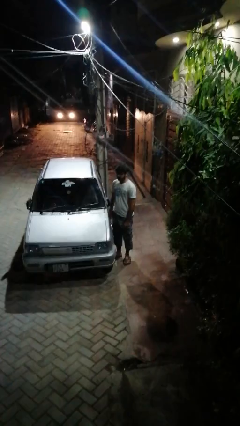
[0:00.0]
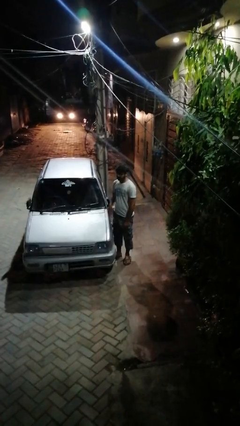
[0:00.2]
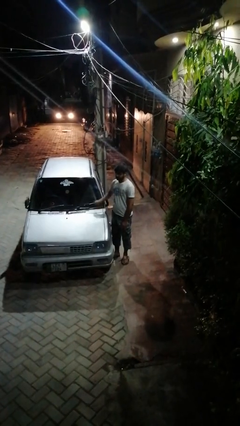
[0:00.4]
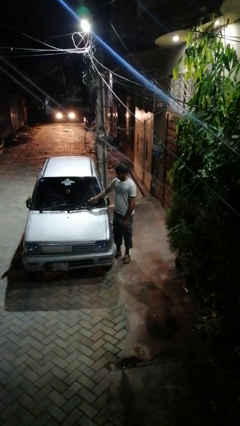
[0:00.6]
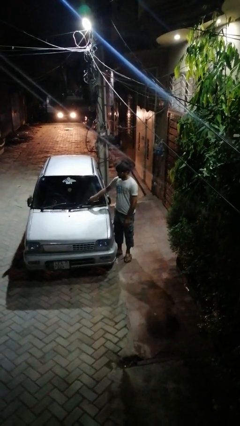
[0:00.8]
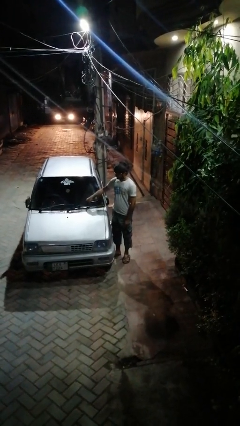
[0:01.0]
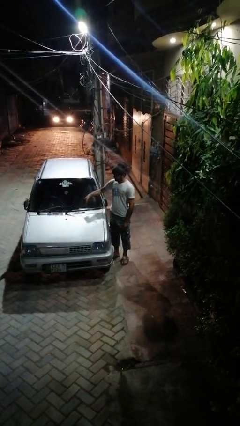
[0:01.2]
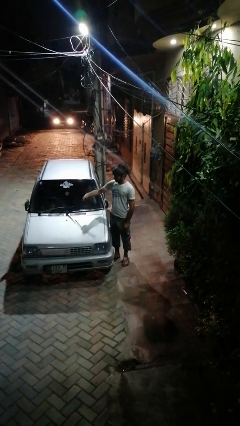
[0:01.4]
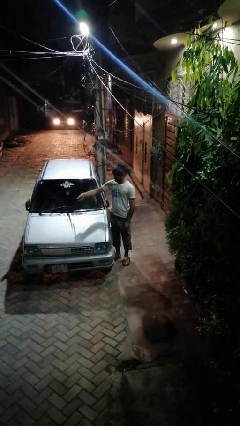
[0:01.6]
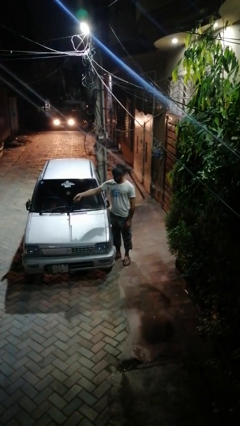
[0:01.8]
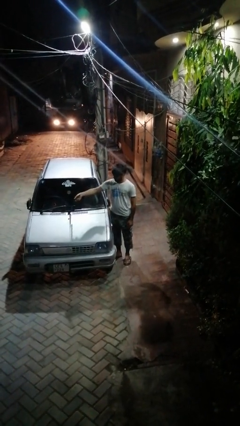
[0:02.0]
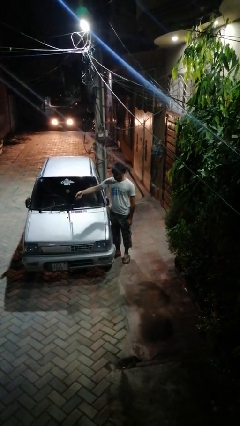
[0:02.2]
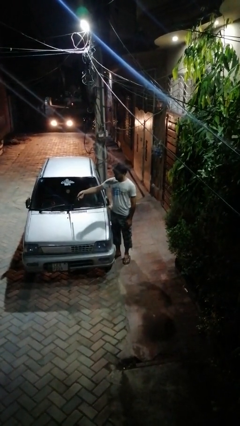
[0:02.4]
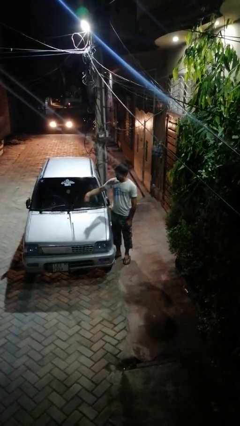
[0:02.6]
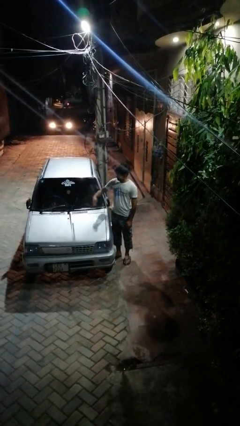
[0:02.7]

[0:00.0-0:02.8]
person flips up car wipers

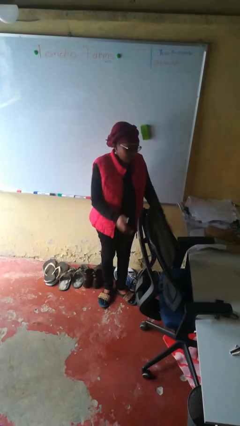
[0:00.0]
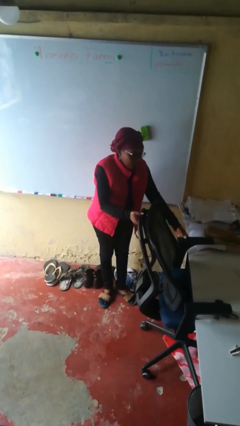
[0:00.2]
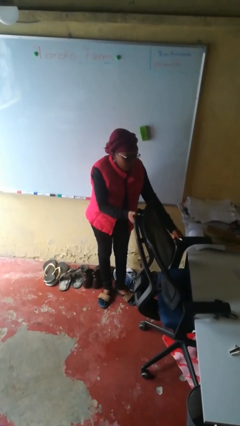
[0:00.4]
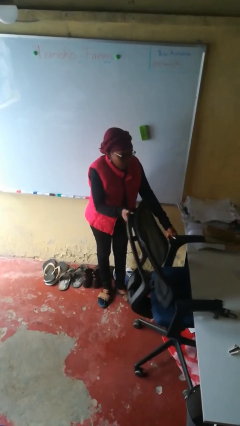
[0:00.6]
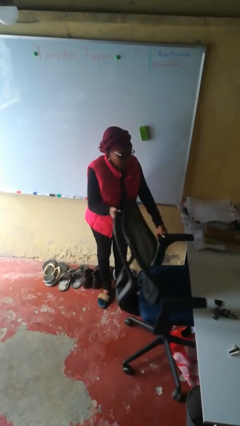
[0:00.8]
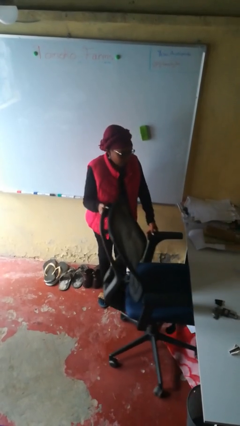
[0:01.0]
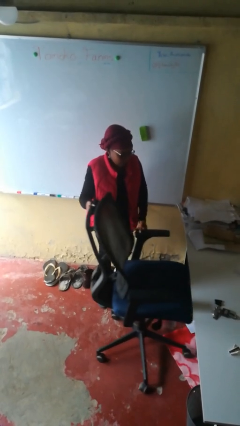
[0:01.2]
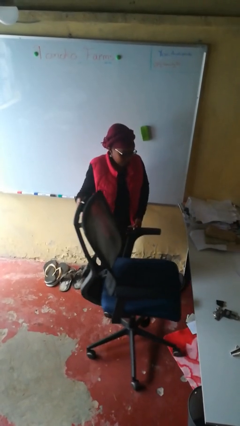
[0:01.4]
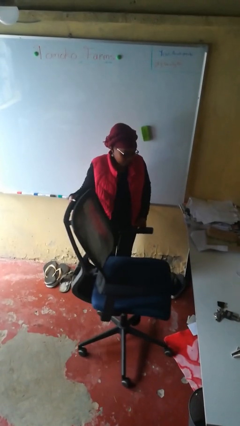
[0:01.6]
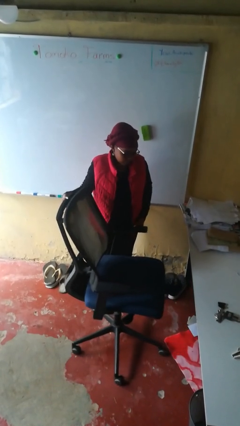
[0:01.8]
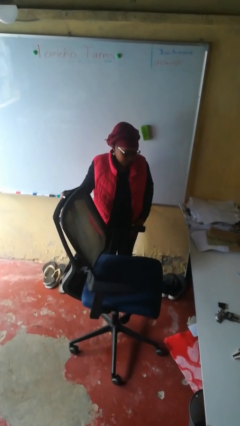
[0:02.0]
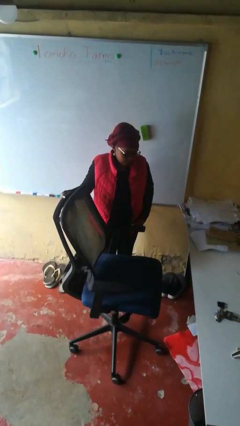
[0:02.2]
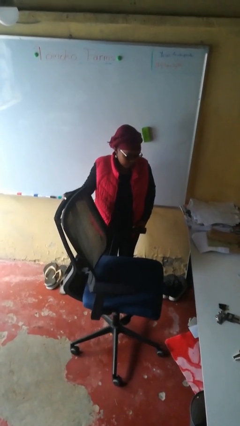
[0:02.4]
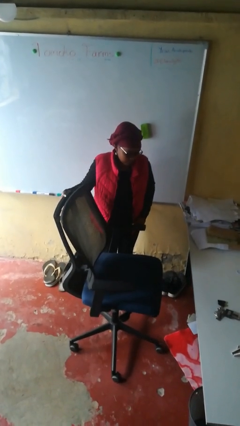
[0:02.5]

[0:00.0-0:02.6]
person pulls out chair

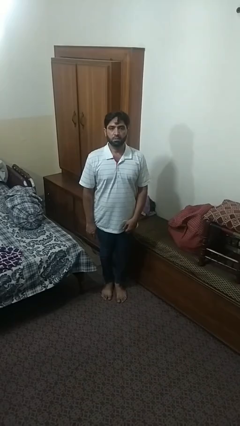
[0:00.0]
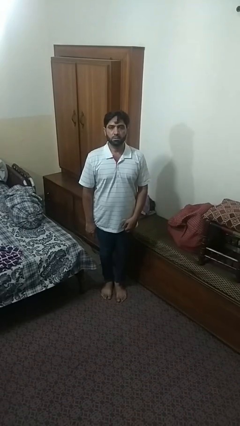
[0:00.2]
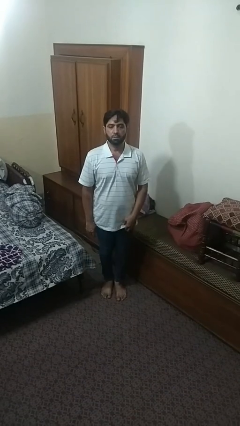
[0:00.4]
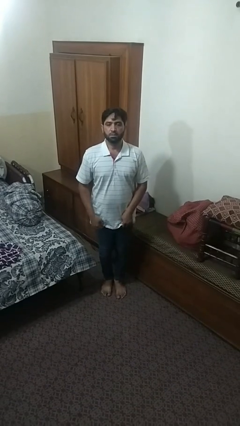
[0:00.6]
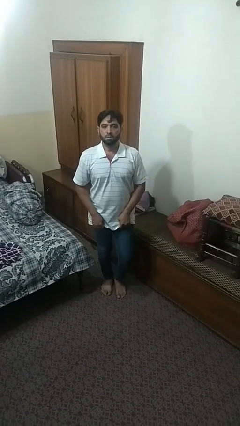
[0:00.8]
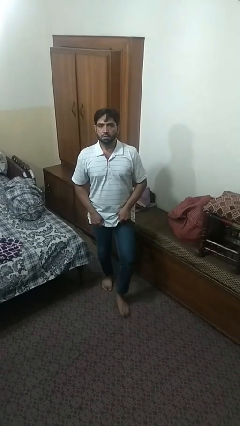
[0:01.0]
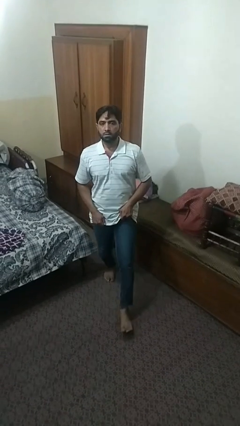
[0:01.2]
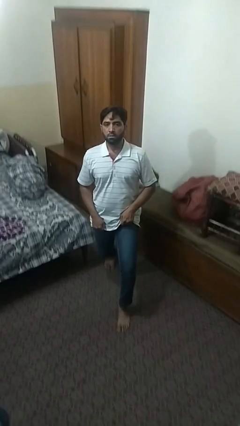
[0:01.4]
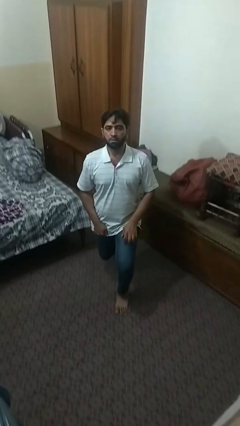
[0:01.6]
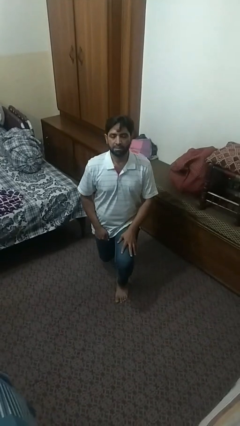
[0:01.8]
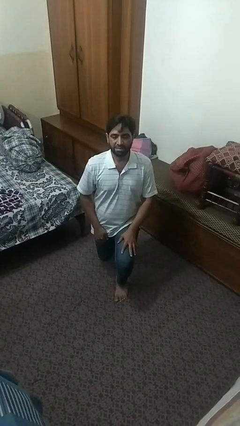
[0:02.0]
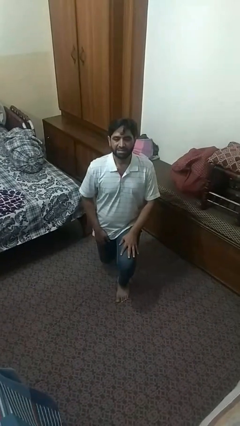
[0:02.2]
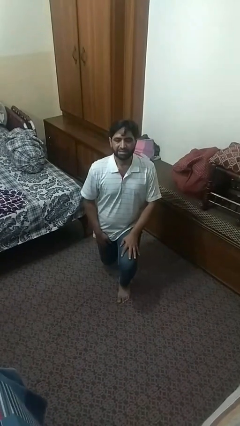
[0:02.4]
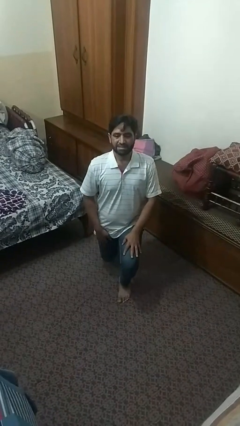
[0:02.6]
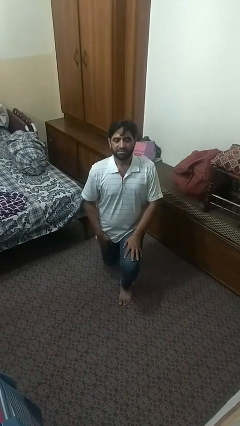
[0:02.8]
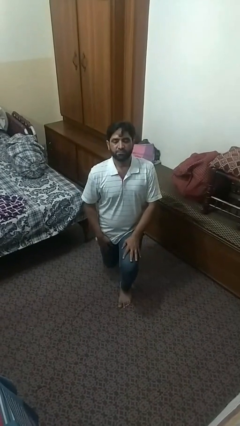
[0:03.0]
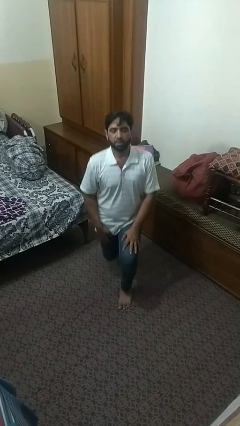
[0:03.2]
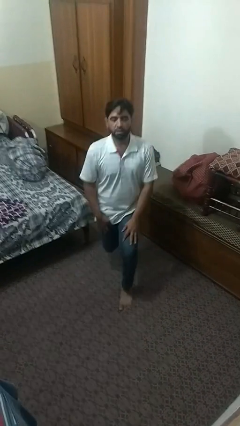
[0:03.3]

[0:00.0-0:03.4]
person exercises with lunges

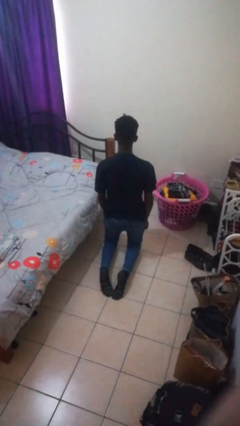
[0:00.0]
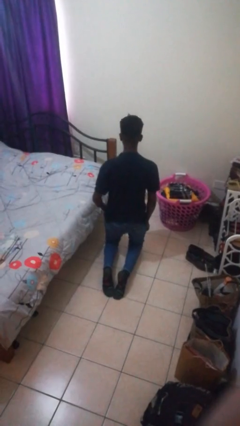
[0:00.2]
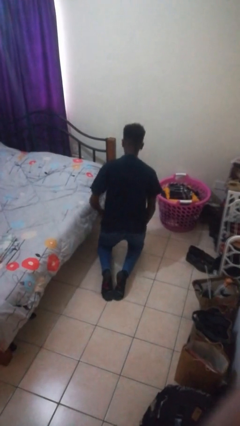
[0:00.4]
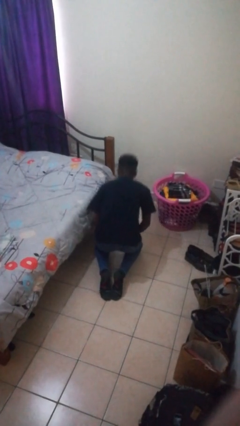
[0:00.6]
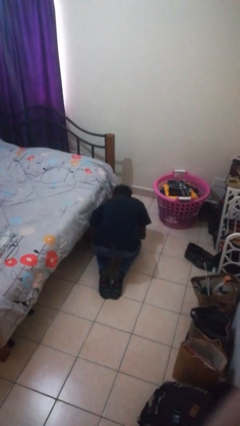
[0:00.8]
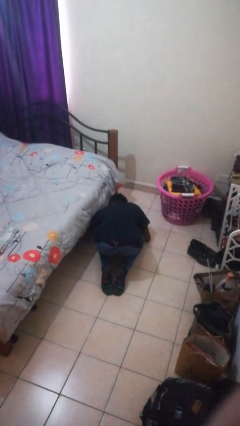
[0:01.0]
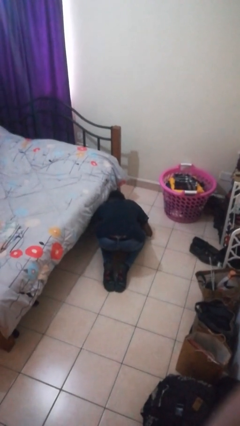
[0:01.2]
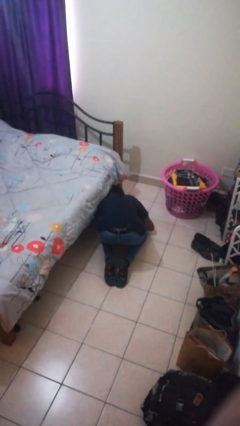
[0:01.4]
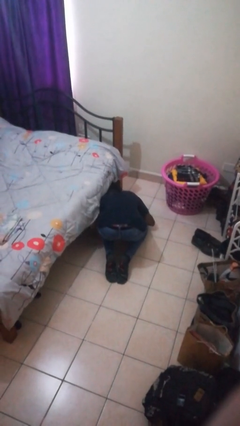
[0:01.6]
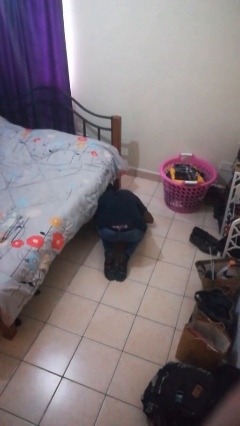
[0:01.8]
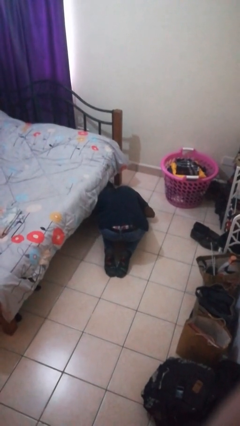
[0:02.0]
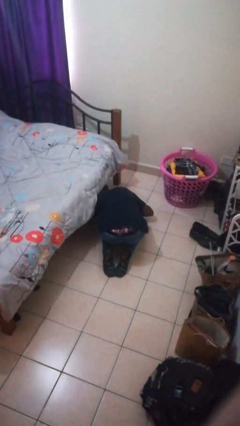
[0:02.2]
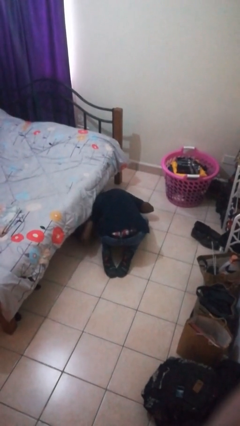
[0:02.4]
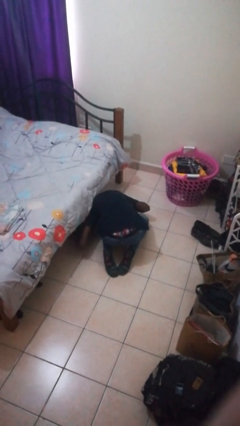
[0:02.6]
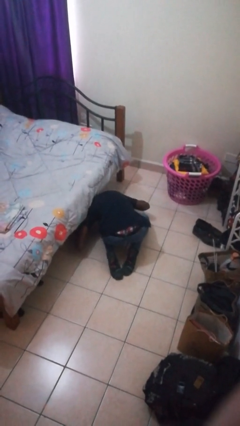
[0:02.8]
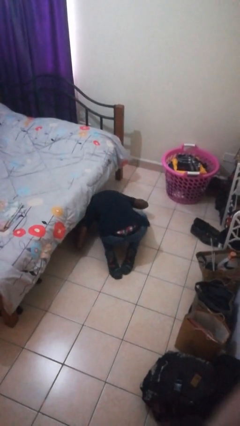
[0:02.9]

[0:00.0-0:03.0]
person searches under bed

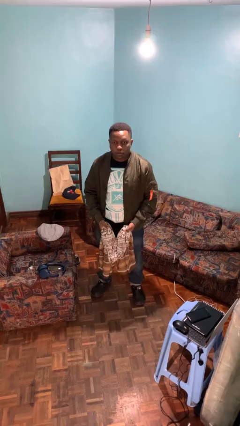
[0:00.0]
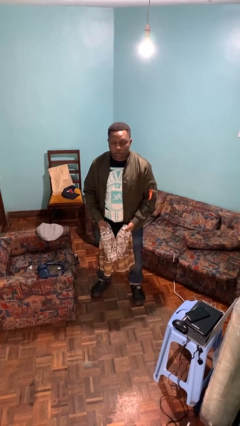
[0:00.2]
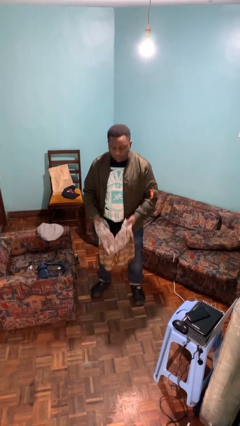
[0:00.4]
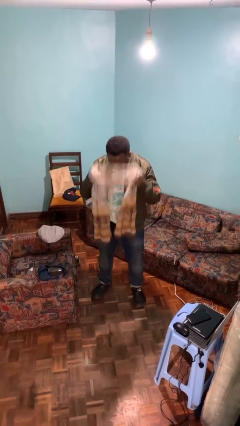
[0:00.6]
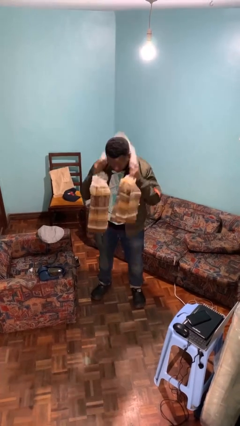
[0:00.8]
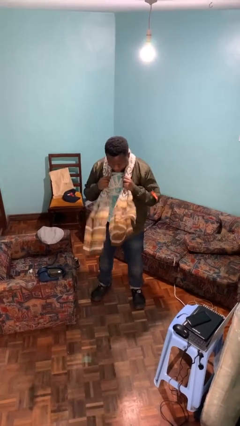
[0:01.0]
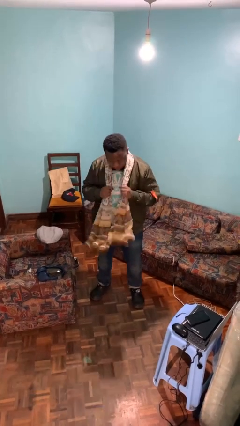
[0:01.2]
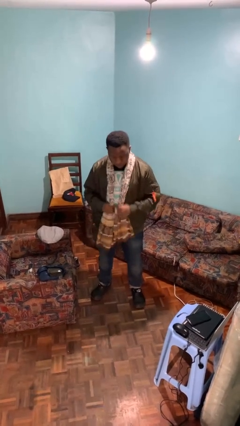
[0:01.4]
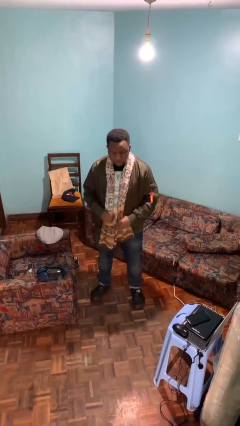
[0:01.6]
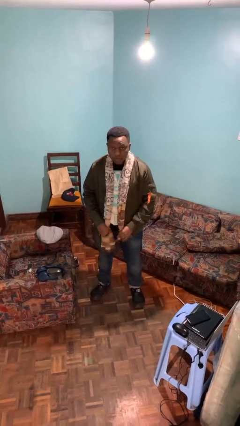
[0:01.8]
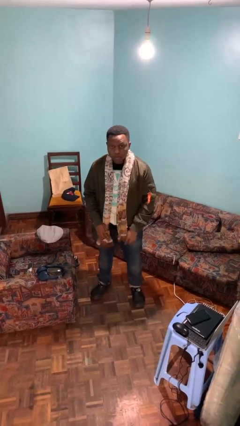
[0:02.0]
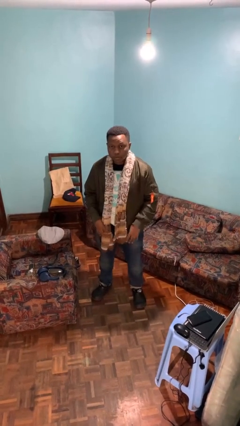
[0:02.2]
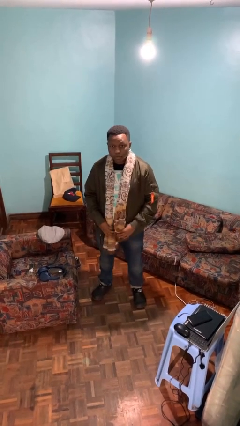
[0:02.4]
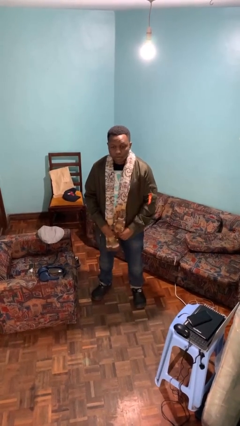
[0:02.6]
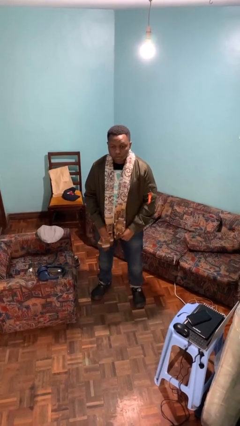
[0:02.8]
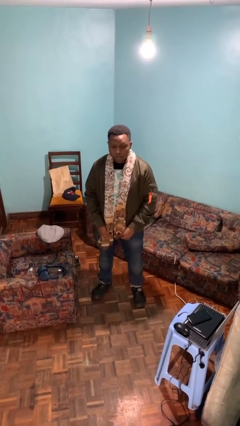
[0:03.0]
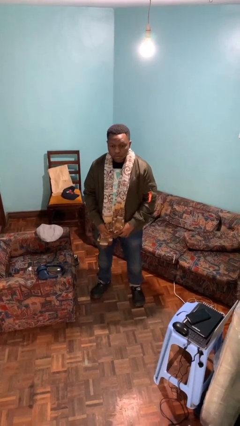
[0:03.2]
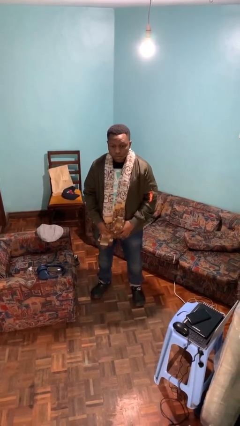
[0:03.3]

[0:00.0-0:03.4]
person puts on scarf

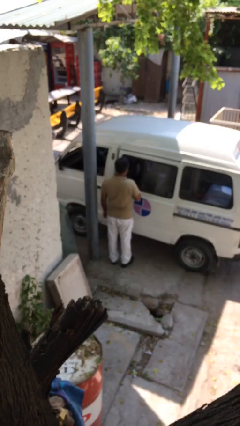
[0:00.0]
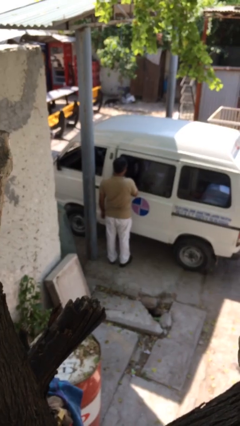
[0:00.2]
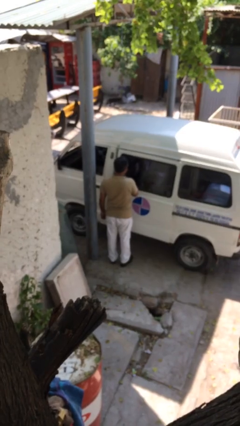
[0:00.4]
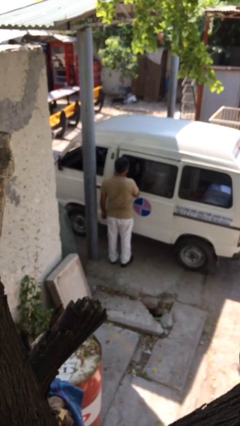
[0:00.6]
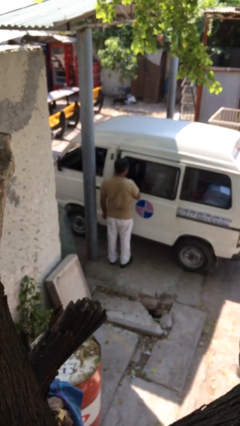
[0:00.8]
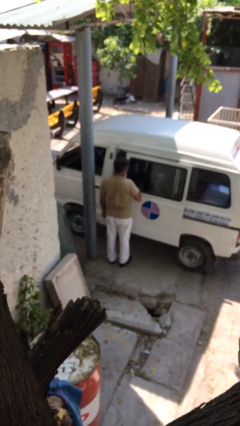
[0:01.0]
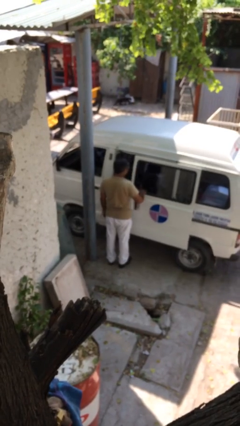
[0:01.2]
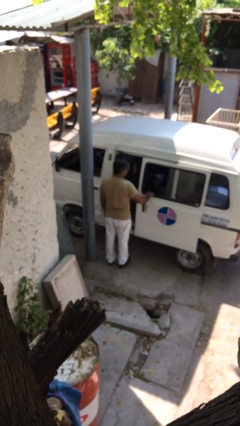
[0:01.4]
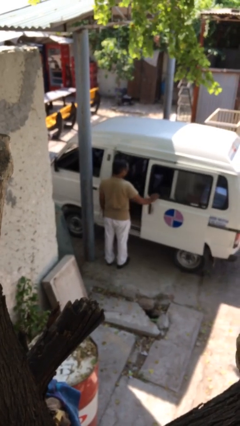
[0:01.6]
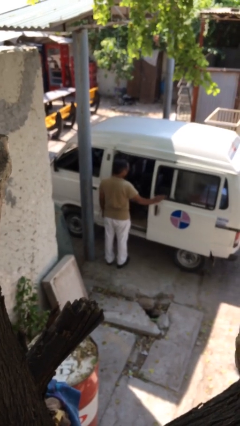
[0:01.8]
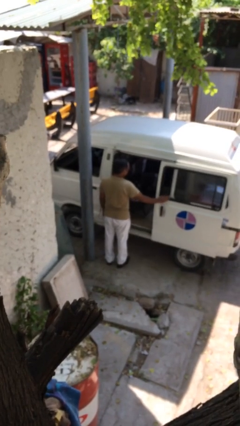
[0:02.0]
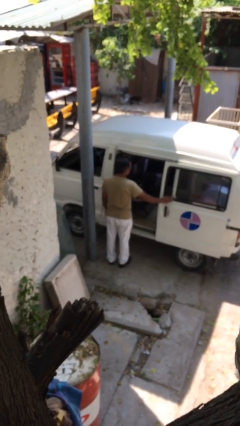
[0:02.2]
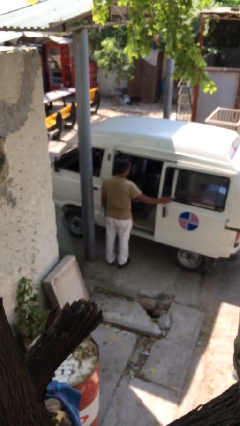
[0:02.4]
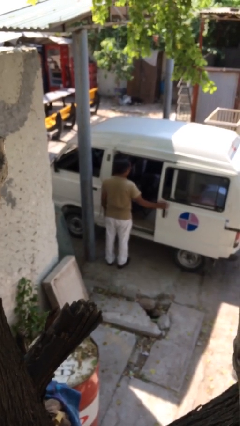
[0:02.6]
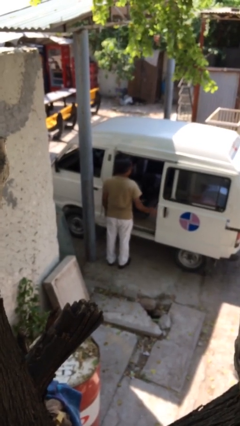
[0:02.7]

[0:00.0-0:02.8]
person opens car door
